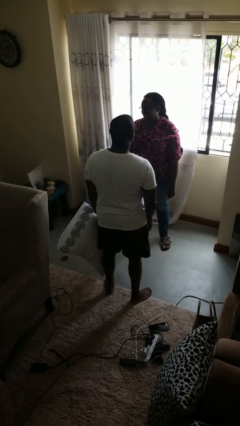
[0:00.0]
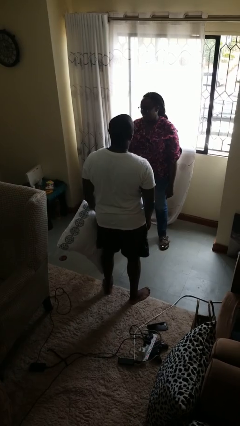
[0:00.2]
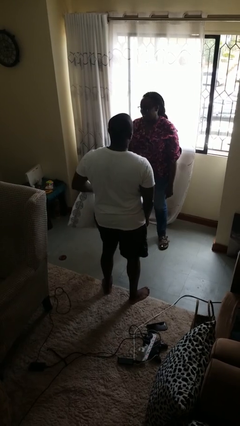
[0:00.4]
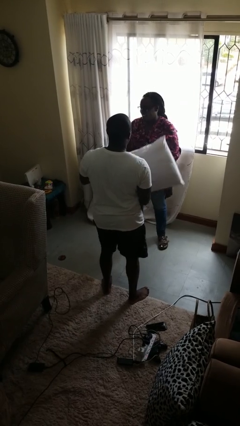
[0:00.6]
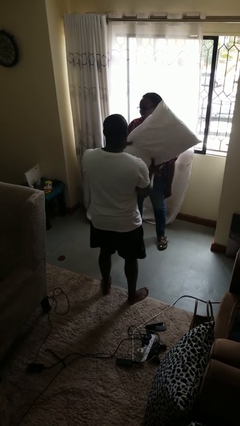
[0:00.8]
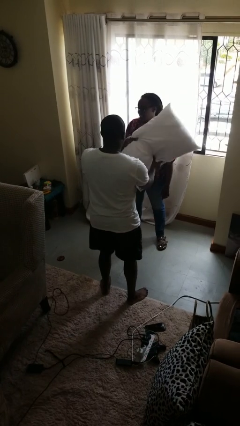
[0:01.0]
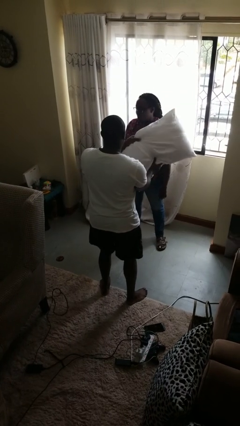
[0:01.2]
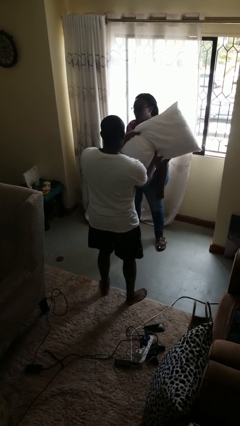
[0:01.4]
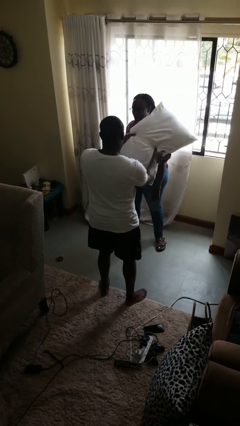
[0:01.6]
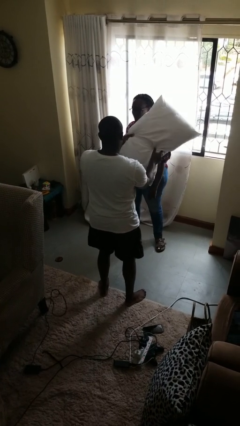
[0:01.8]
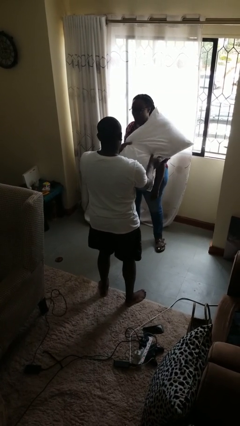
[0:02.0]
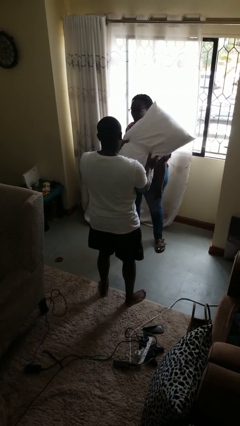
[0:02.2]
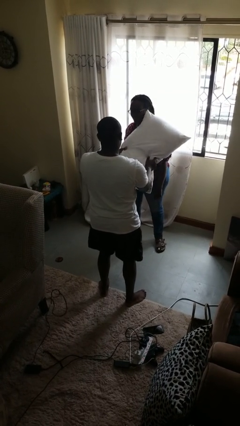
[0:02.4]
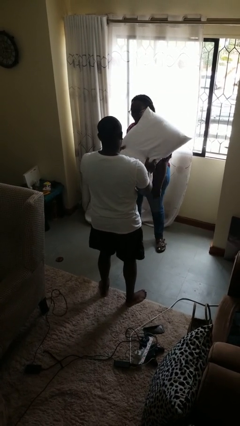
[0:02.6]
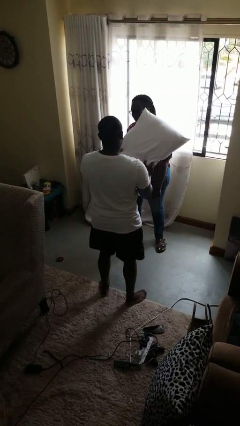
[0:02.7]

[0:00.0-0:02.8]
person hits person with pillow

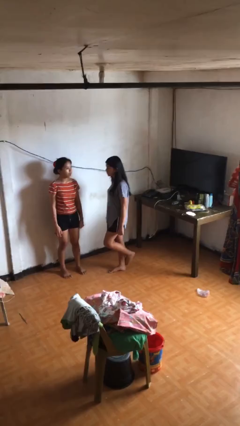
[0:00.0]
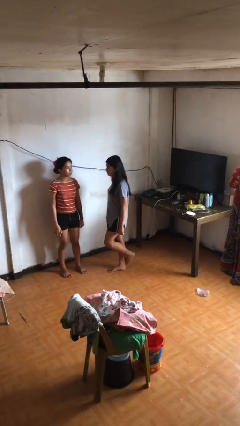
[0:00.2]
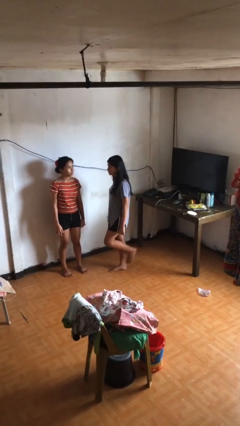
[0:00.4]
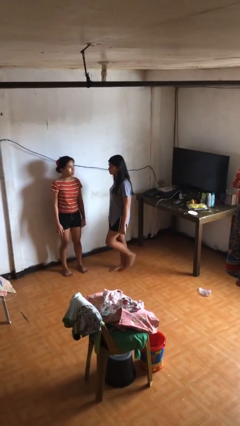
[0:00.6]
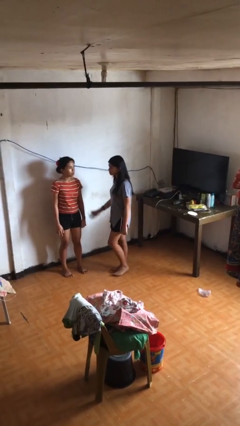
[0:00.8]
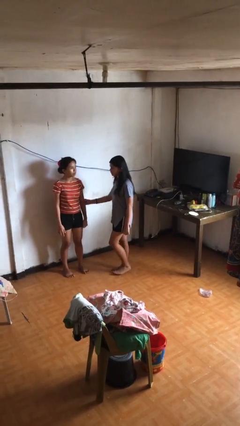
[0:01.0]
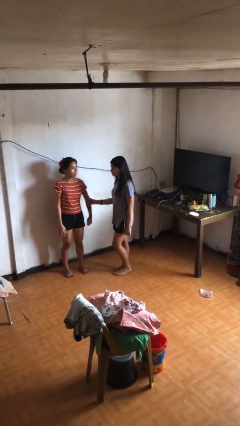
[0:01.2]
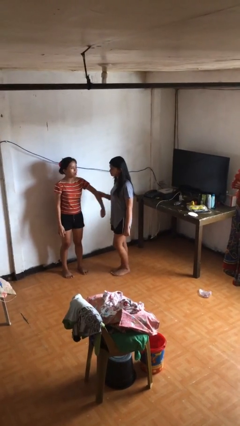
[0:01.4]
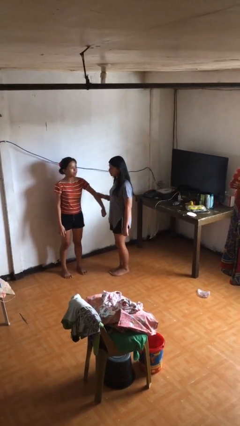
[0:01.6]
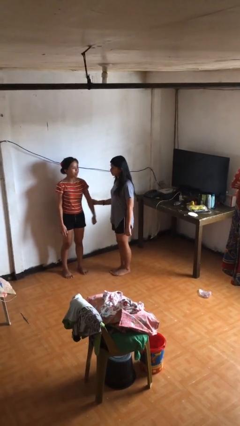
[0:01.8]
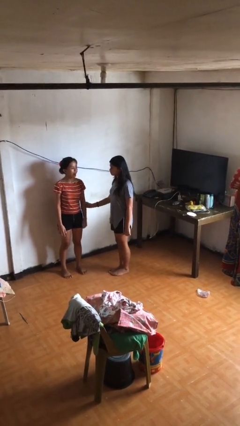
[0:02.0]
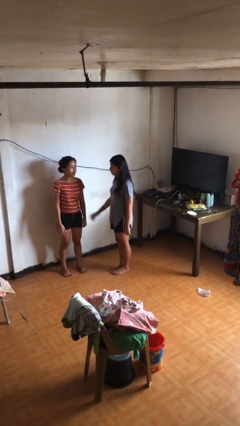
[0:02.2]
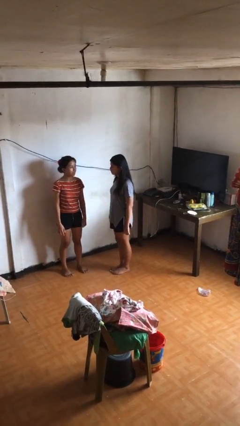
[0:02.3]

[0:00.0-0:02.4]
person grabs person by forearm

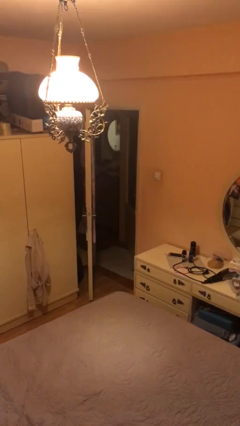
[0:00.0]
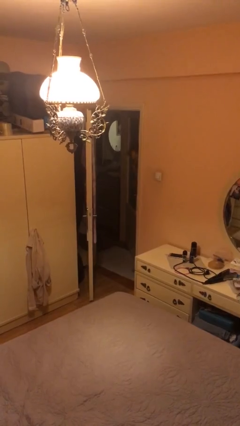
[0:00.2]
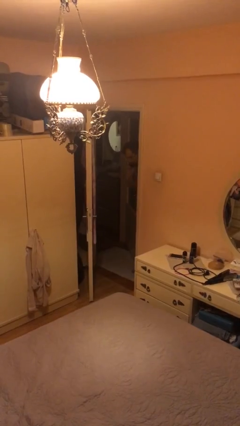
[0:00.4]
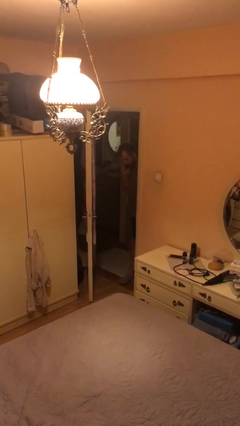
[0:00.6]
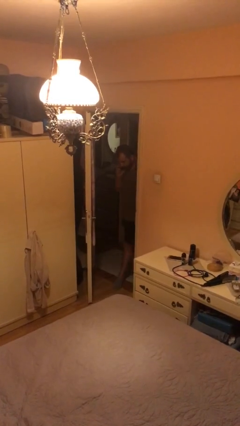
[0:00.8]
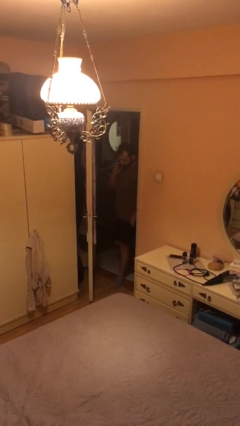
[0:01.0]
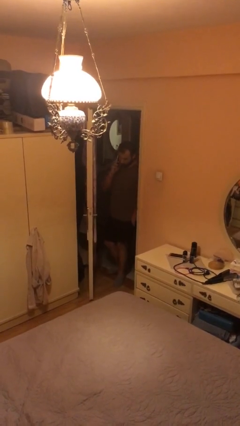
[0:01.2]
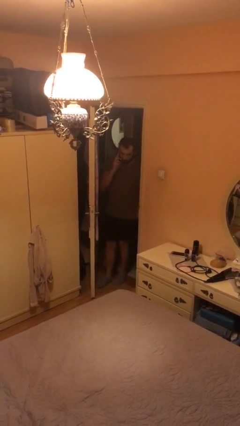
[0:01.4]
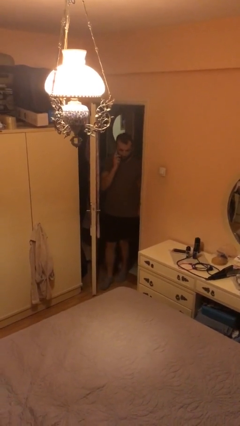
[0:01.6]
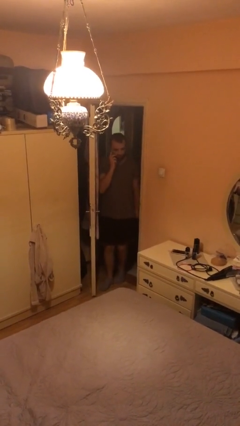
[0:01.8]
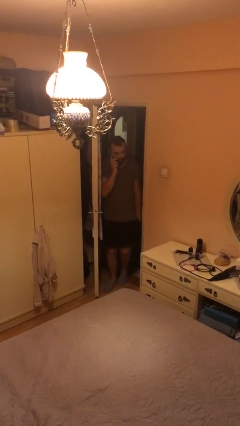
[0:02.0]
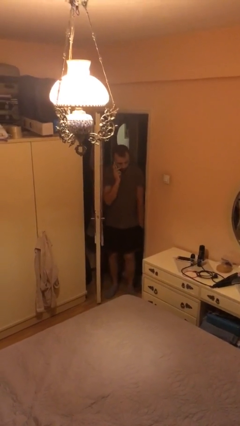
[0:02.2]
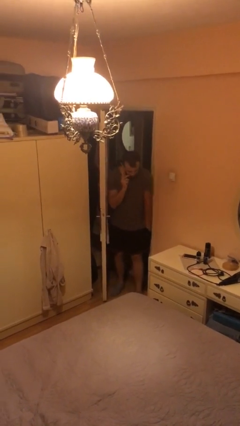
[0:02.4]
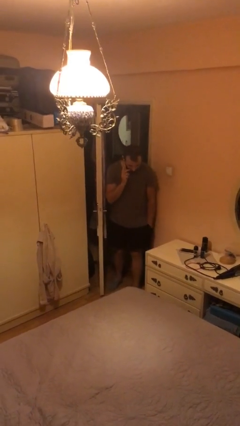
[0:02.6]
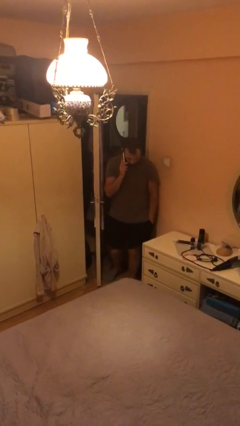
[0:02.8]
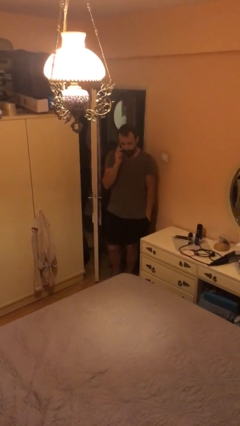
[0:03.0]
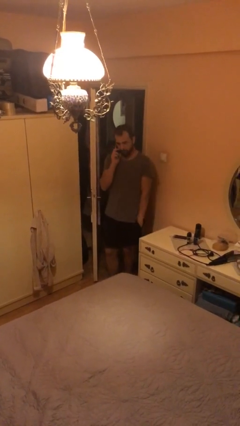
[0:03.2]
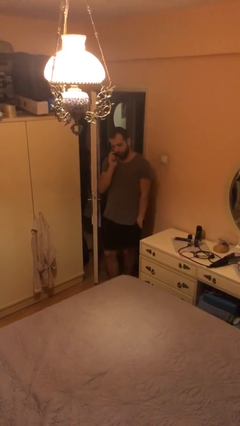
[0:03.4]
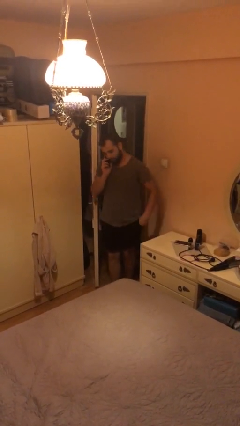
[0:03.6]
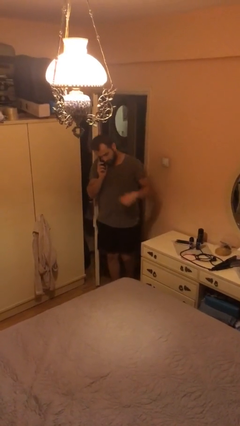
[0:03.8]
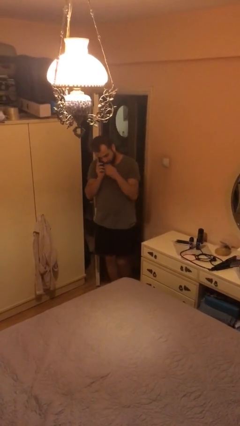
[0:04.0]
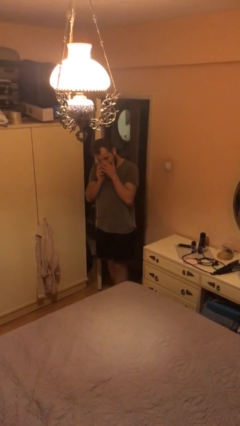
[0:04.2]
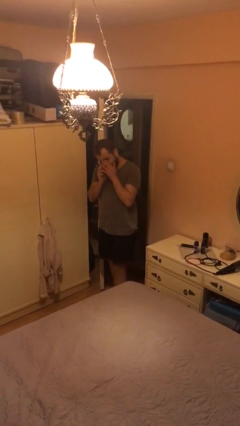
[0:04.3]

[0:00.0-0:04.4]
person enters scene through structure

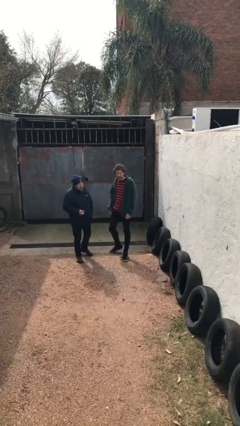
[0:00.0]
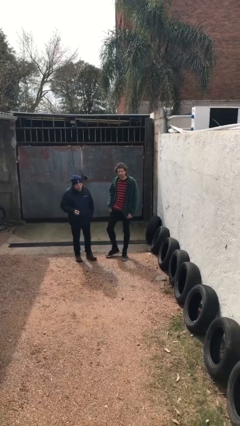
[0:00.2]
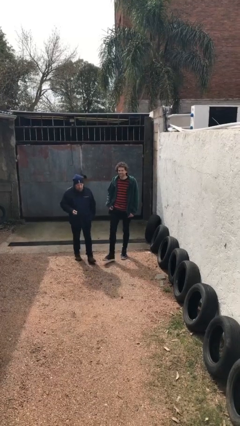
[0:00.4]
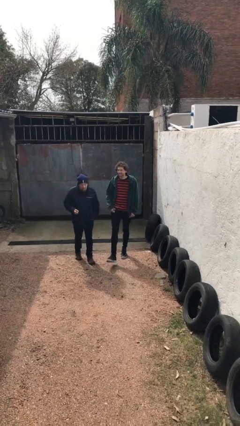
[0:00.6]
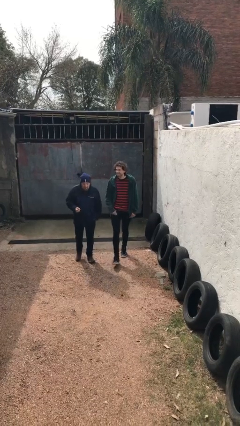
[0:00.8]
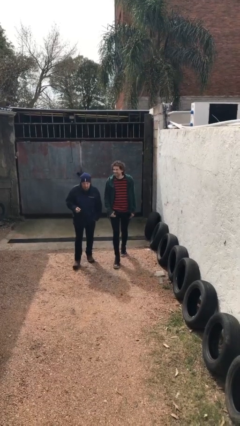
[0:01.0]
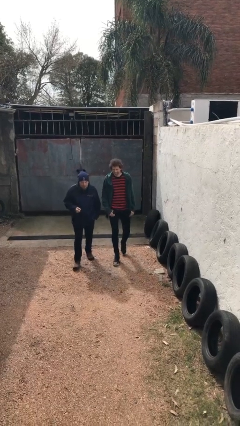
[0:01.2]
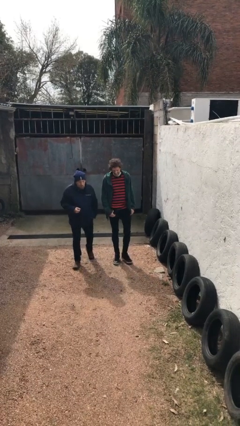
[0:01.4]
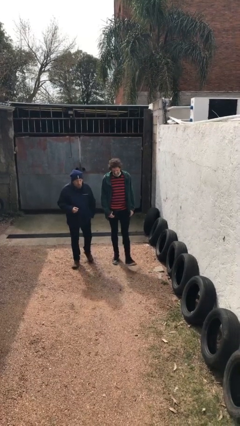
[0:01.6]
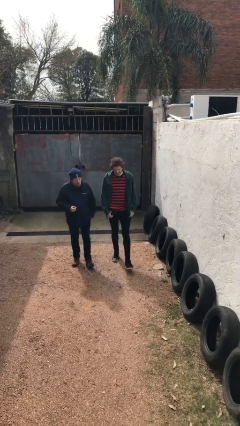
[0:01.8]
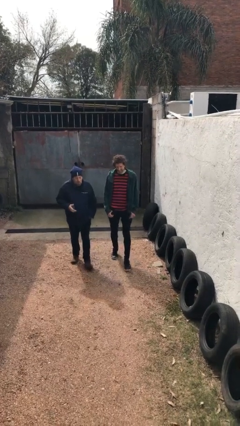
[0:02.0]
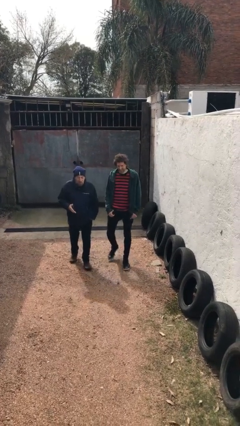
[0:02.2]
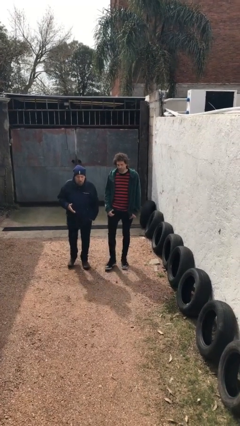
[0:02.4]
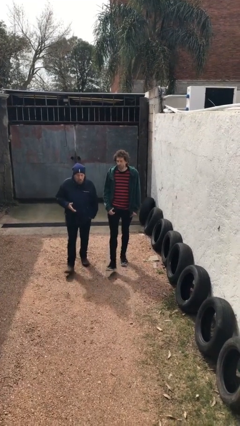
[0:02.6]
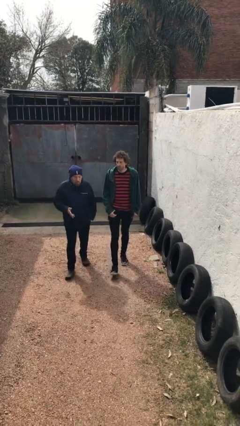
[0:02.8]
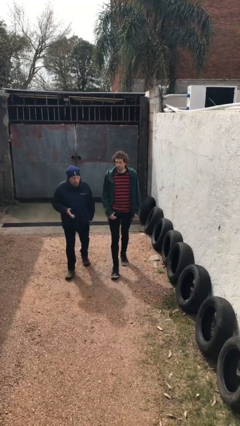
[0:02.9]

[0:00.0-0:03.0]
person talks to person

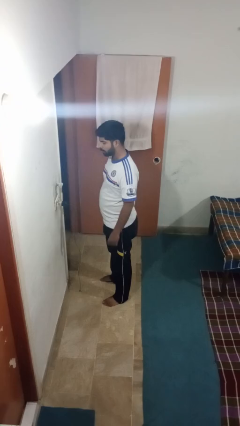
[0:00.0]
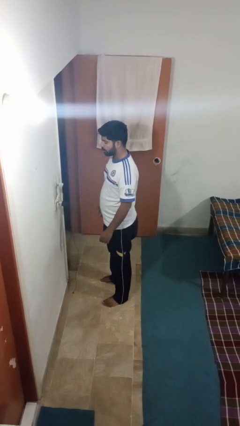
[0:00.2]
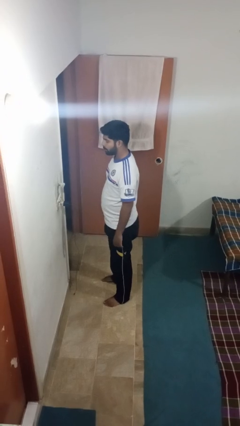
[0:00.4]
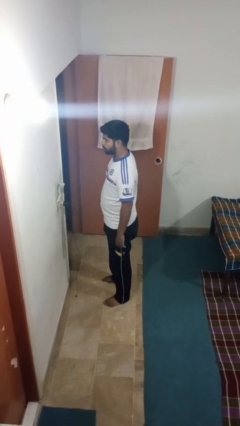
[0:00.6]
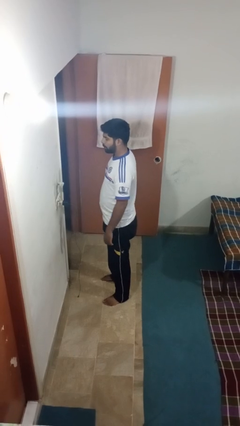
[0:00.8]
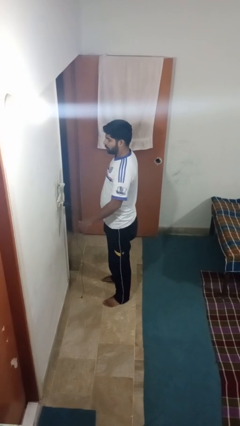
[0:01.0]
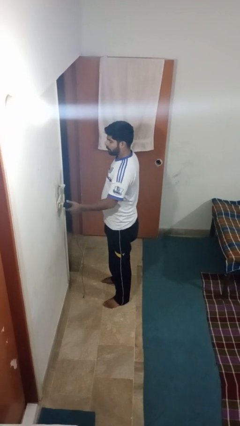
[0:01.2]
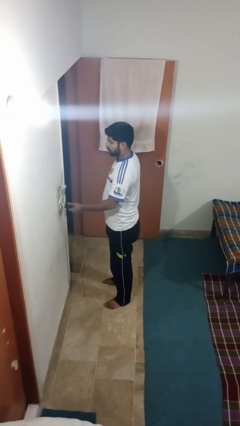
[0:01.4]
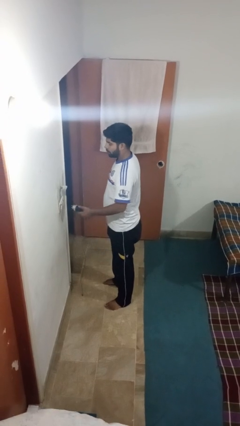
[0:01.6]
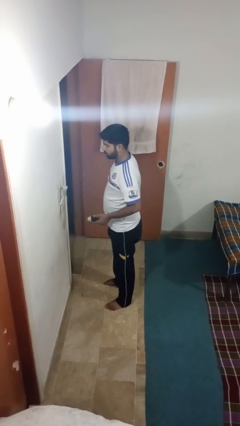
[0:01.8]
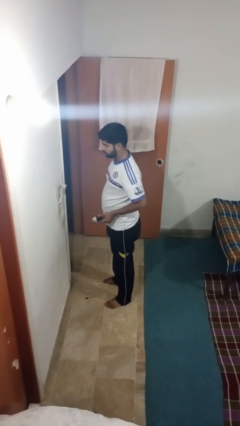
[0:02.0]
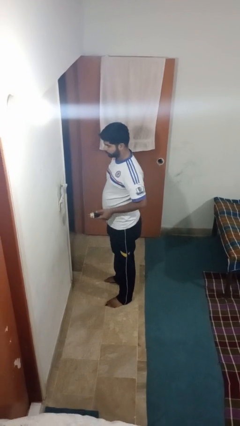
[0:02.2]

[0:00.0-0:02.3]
person unplugs from electrical socket

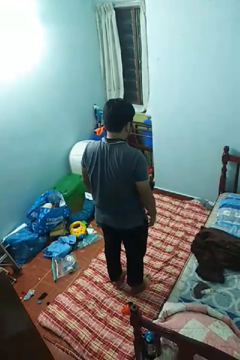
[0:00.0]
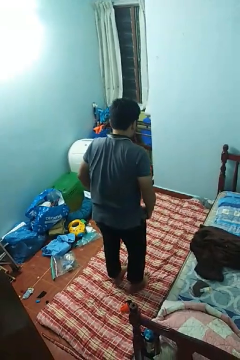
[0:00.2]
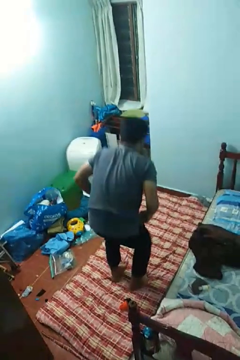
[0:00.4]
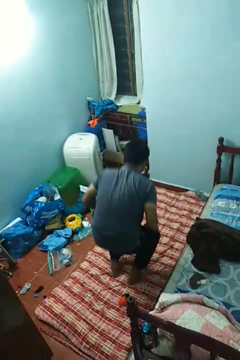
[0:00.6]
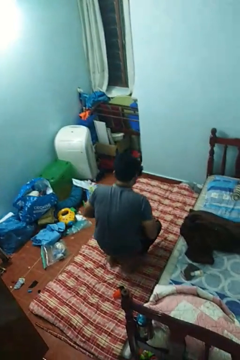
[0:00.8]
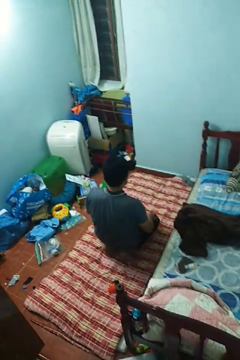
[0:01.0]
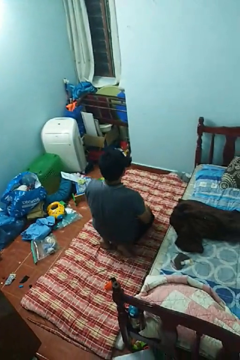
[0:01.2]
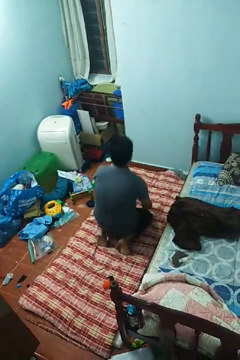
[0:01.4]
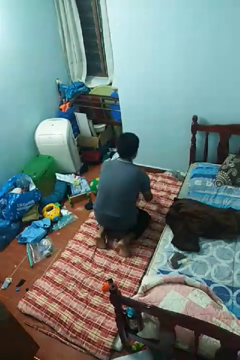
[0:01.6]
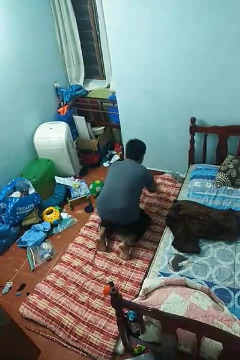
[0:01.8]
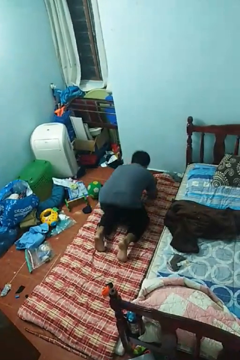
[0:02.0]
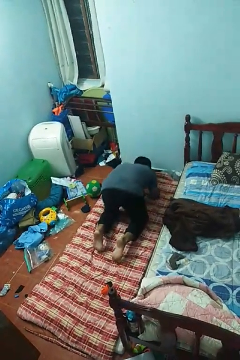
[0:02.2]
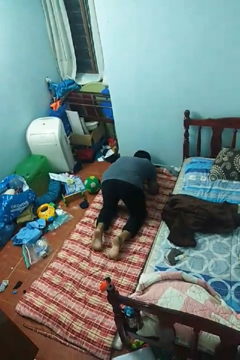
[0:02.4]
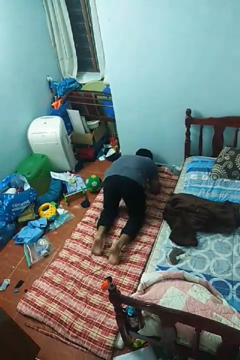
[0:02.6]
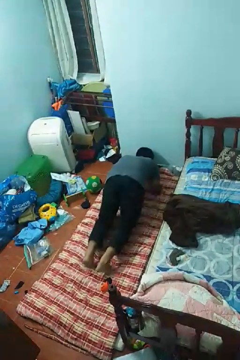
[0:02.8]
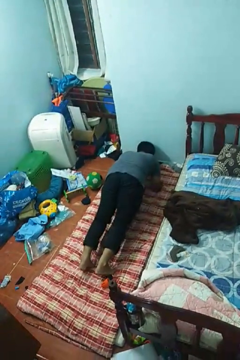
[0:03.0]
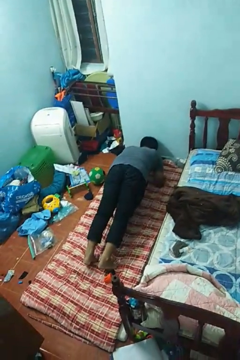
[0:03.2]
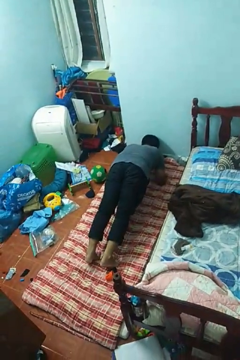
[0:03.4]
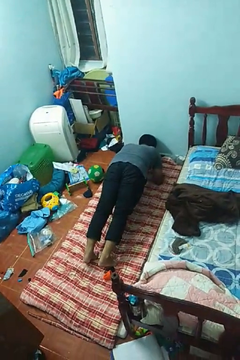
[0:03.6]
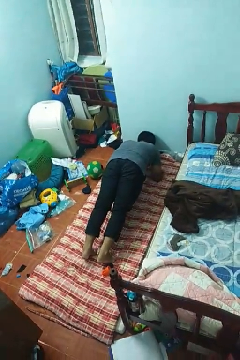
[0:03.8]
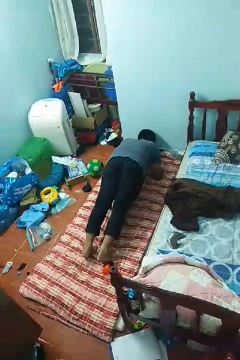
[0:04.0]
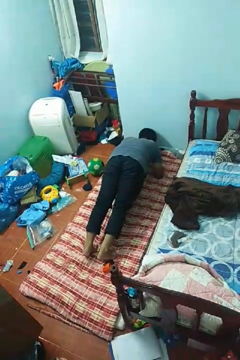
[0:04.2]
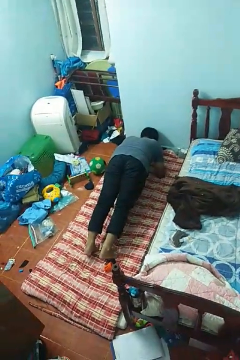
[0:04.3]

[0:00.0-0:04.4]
person exercises with plank
